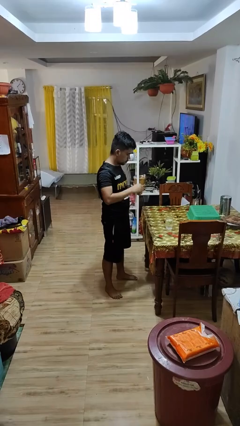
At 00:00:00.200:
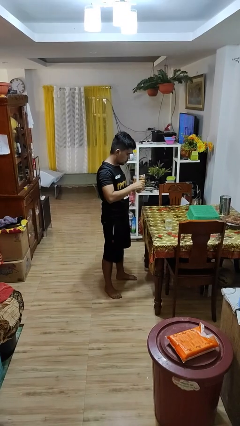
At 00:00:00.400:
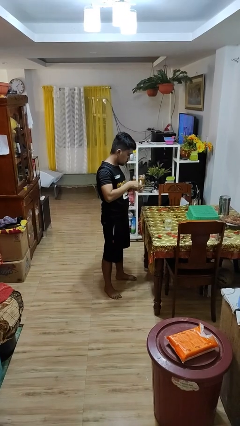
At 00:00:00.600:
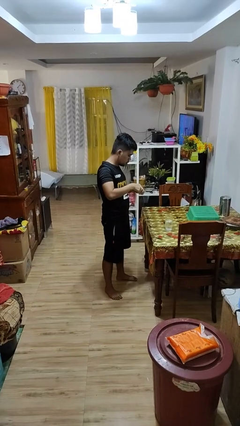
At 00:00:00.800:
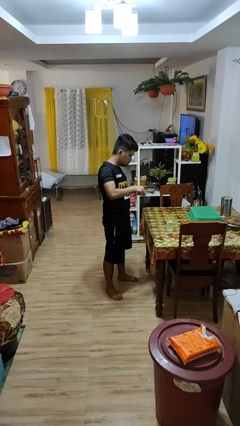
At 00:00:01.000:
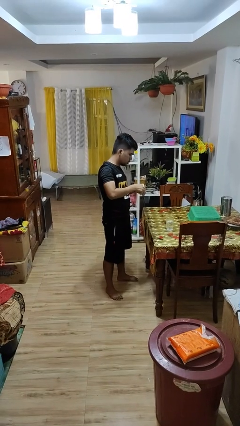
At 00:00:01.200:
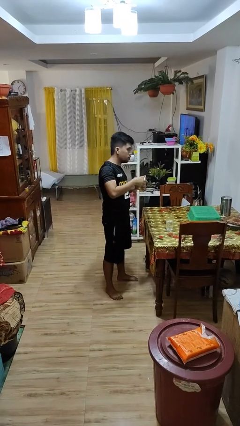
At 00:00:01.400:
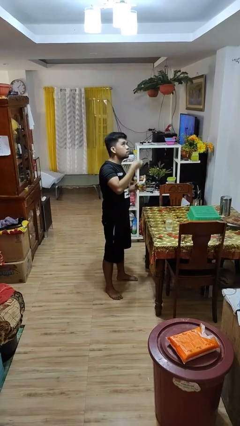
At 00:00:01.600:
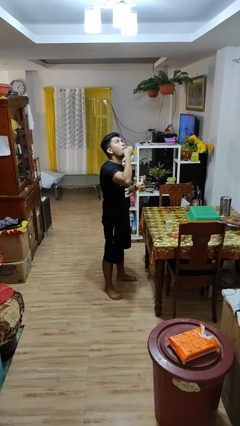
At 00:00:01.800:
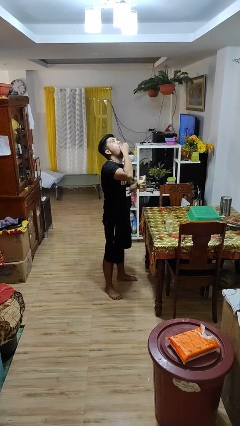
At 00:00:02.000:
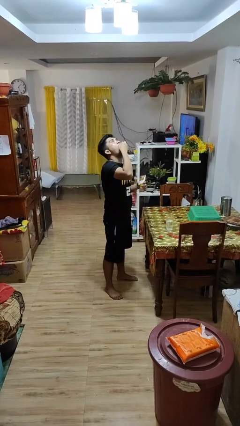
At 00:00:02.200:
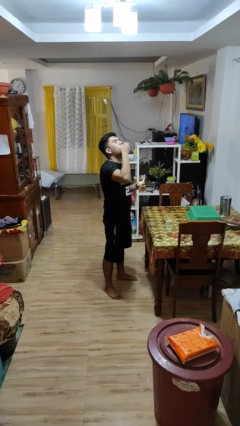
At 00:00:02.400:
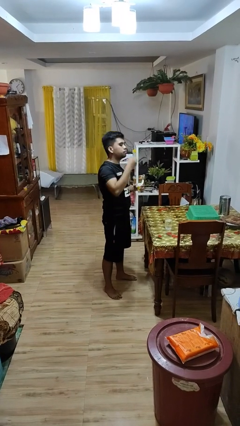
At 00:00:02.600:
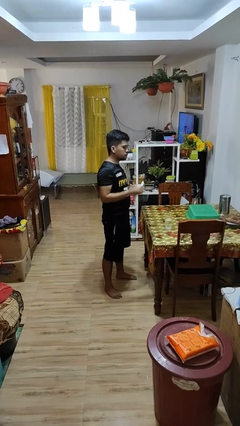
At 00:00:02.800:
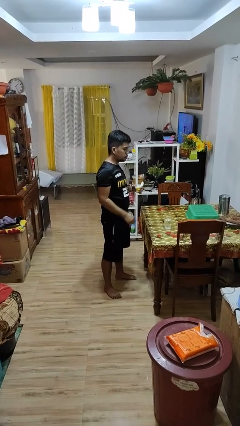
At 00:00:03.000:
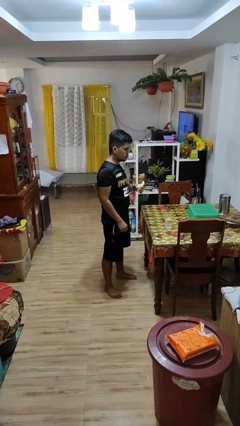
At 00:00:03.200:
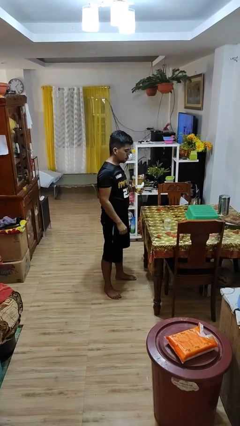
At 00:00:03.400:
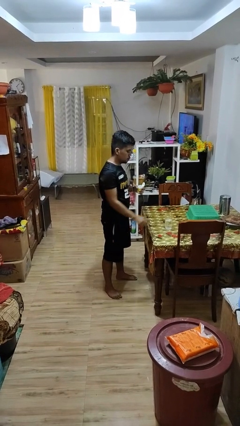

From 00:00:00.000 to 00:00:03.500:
person takes medicine pills

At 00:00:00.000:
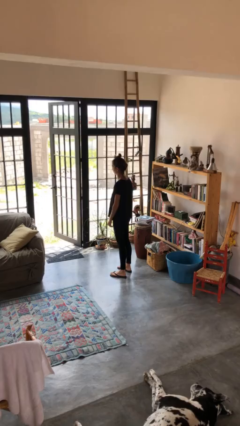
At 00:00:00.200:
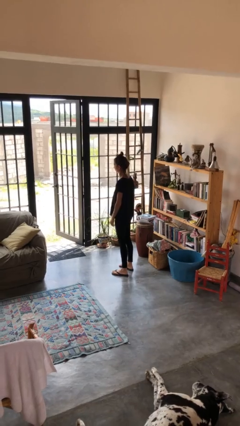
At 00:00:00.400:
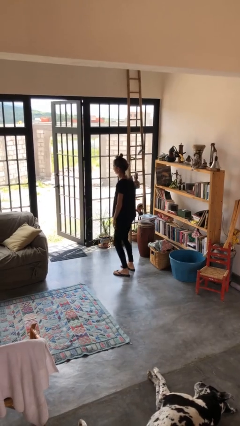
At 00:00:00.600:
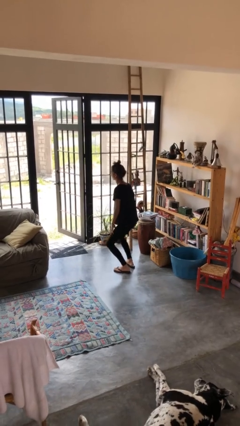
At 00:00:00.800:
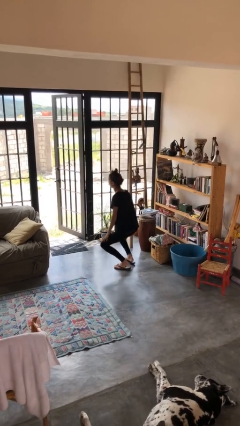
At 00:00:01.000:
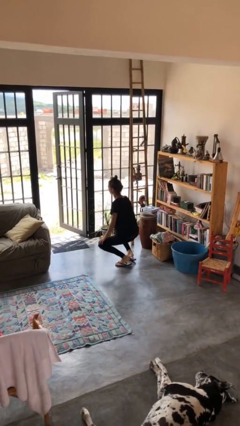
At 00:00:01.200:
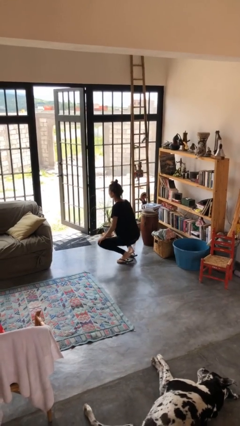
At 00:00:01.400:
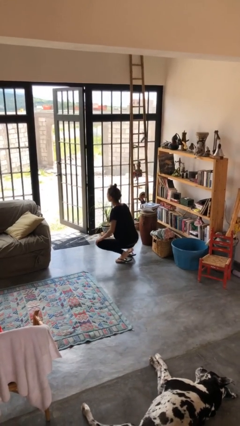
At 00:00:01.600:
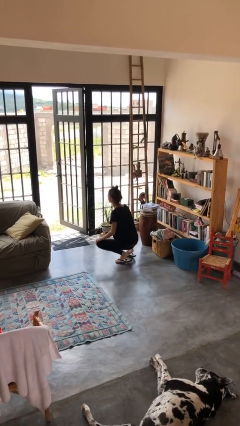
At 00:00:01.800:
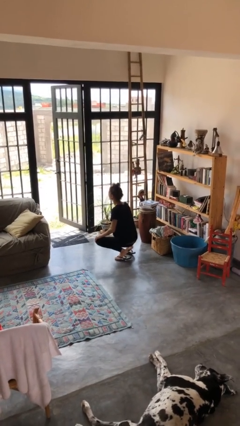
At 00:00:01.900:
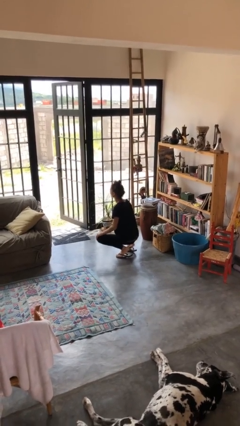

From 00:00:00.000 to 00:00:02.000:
person squats

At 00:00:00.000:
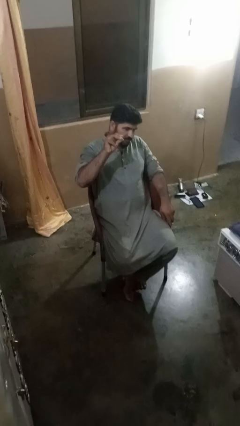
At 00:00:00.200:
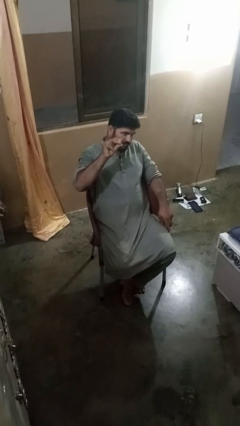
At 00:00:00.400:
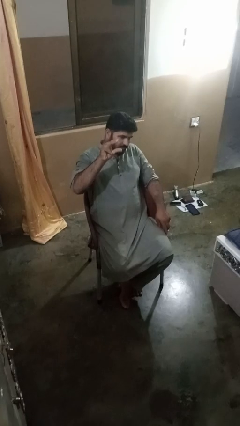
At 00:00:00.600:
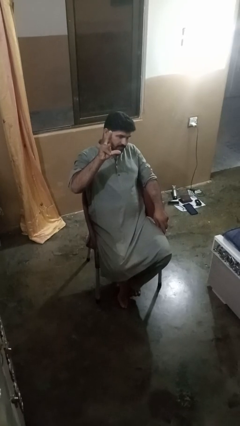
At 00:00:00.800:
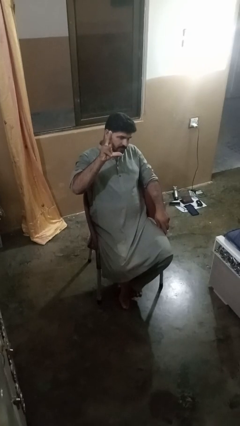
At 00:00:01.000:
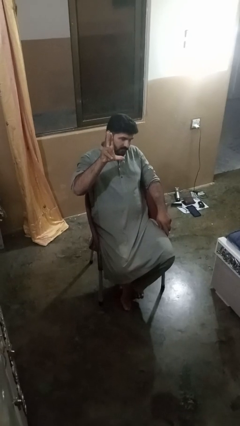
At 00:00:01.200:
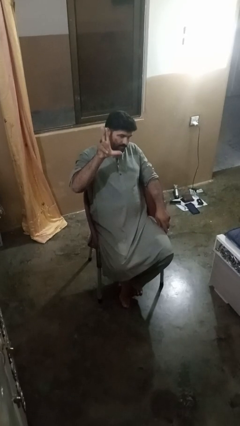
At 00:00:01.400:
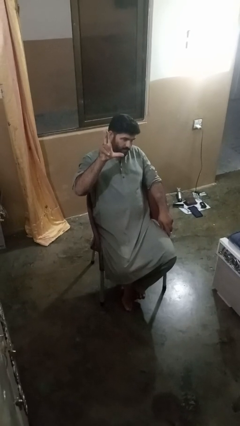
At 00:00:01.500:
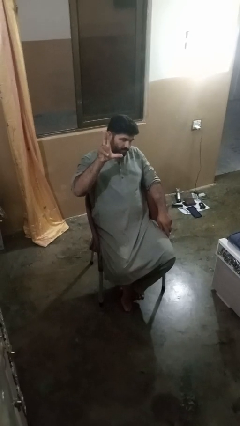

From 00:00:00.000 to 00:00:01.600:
person gestures zoom out

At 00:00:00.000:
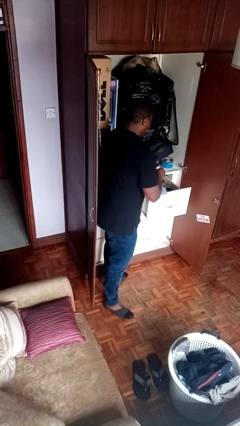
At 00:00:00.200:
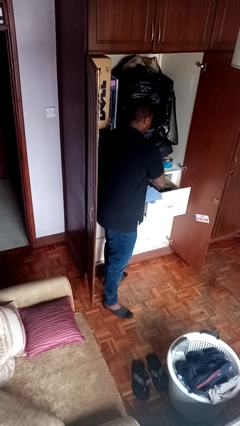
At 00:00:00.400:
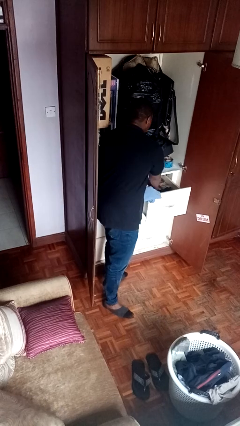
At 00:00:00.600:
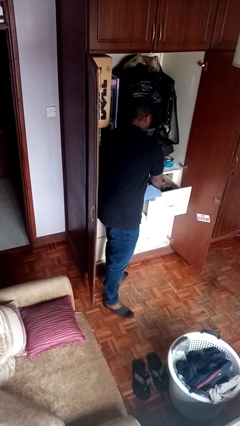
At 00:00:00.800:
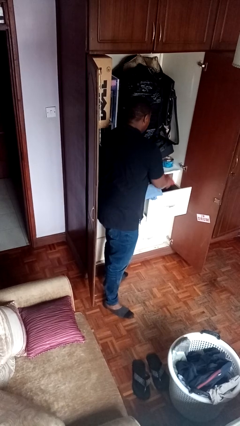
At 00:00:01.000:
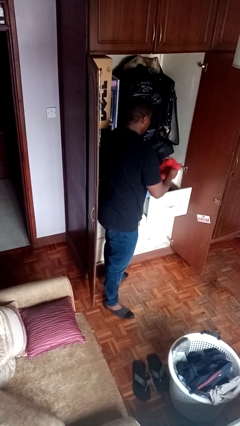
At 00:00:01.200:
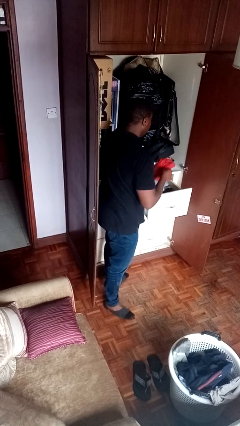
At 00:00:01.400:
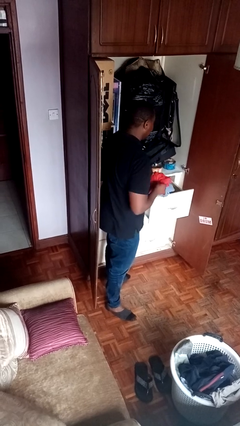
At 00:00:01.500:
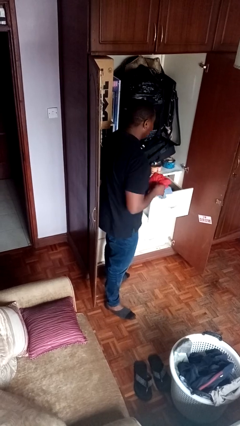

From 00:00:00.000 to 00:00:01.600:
person takes clothes from dresser

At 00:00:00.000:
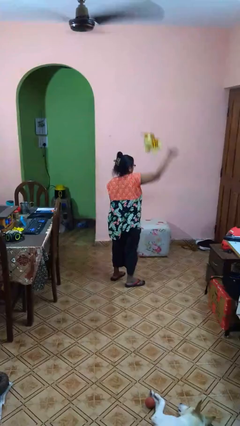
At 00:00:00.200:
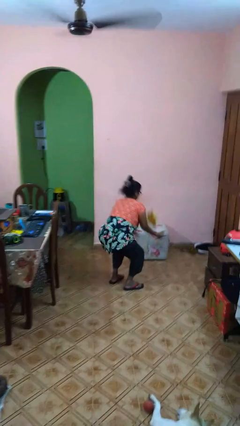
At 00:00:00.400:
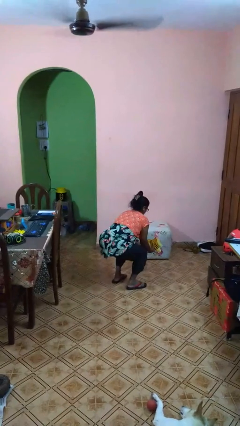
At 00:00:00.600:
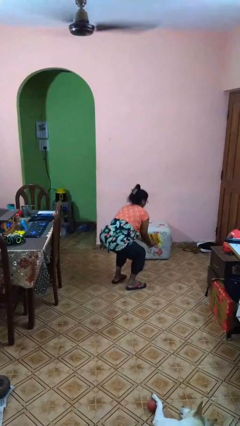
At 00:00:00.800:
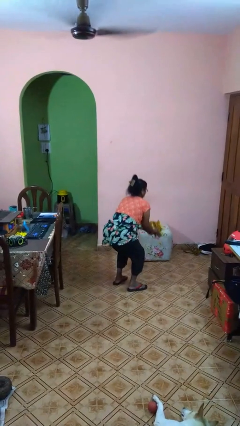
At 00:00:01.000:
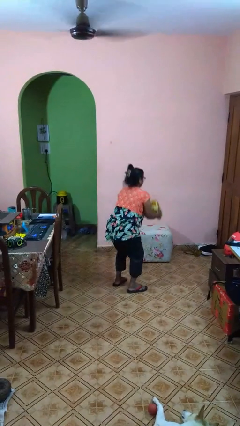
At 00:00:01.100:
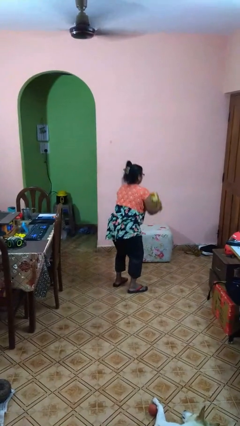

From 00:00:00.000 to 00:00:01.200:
person catches dropped object

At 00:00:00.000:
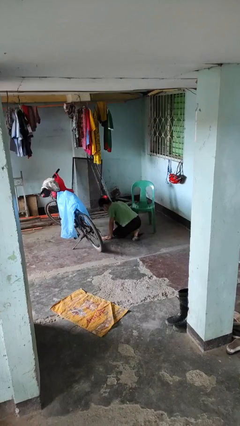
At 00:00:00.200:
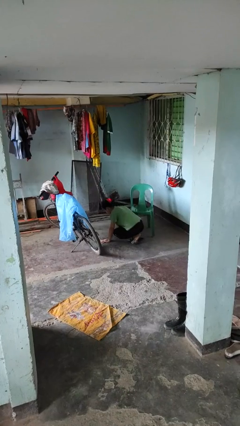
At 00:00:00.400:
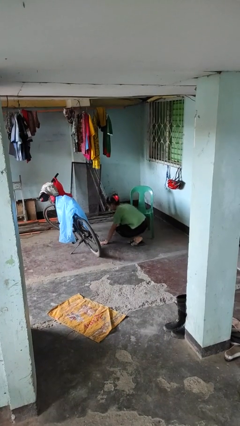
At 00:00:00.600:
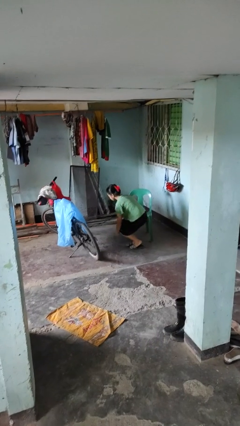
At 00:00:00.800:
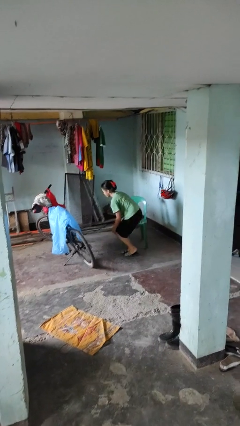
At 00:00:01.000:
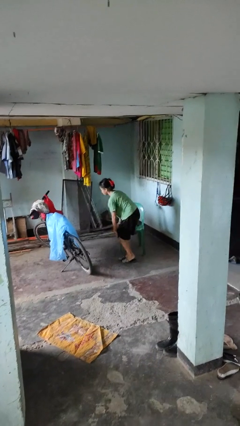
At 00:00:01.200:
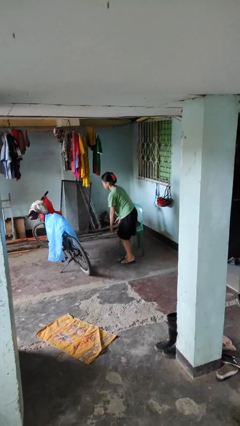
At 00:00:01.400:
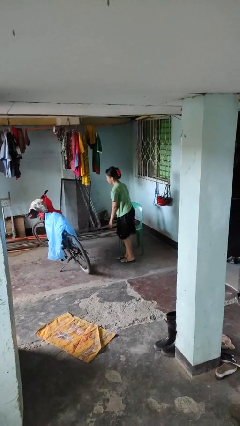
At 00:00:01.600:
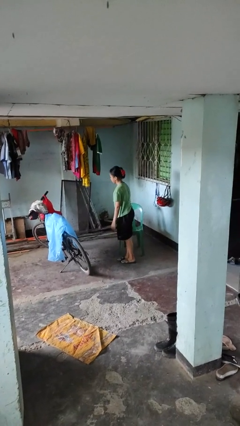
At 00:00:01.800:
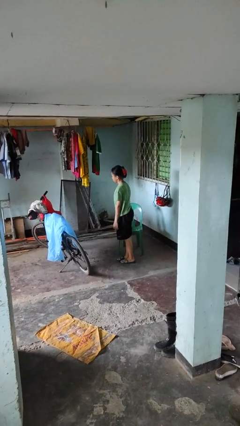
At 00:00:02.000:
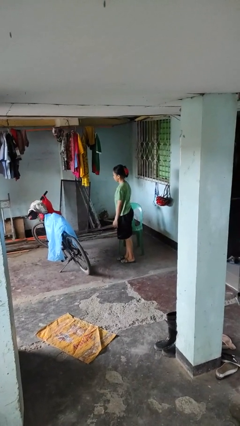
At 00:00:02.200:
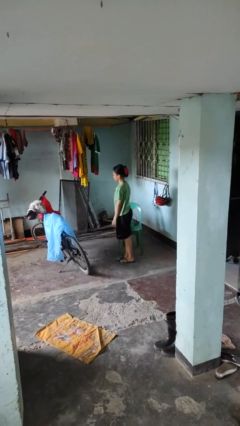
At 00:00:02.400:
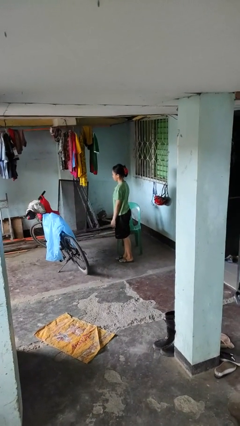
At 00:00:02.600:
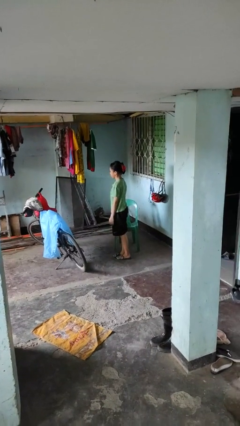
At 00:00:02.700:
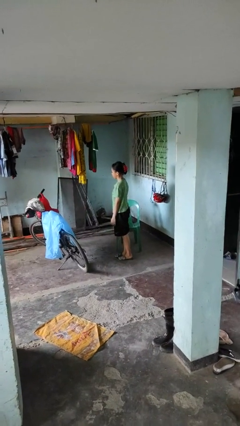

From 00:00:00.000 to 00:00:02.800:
person stands up from floor

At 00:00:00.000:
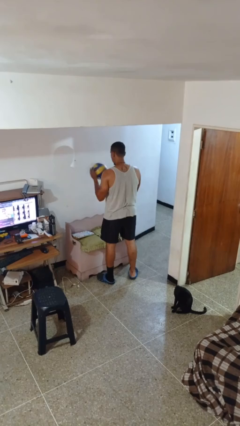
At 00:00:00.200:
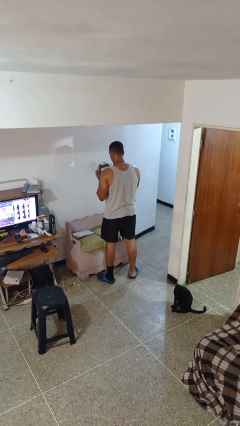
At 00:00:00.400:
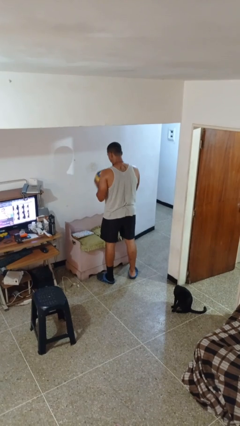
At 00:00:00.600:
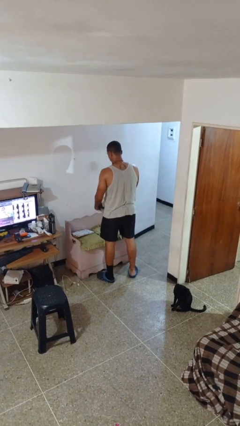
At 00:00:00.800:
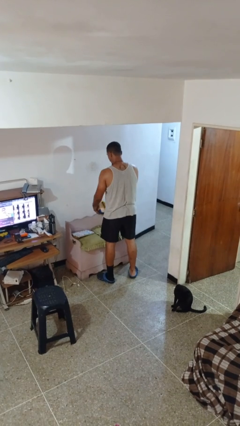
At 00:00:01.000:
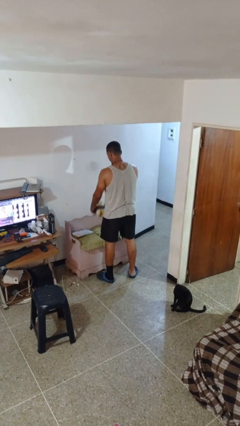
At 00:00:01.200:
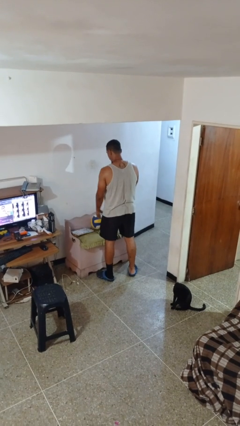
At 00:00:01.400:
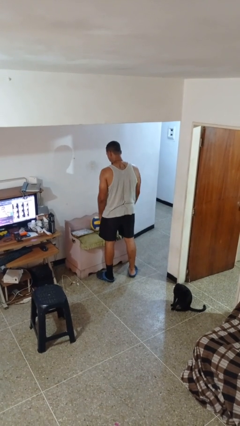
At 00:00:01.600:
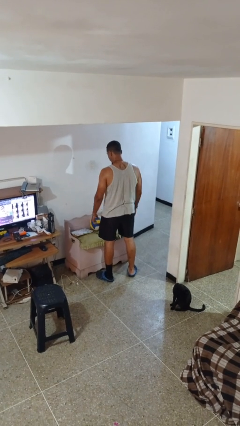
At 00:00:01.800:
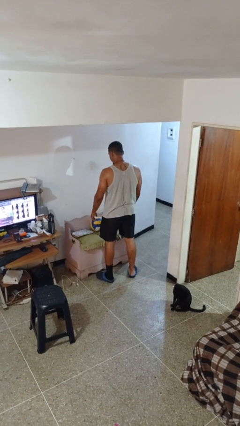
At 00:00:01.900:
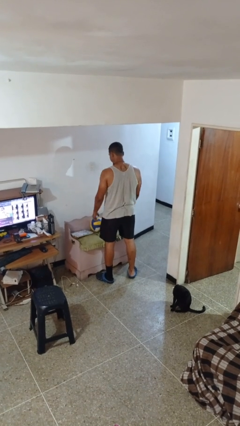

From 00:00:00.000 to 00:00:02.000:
person puts down object on couch

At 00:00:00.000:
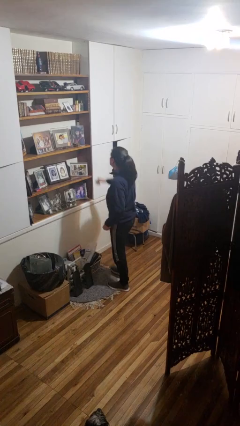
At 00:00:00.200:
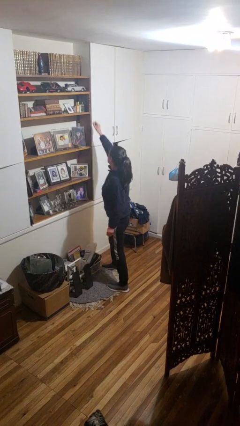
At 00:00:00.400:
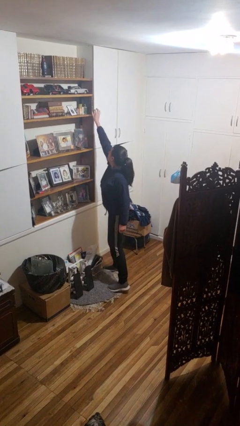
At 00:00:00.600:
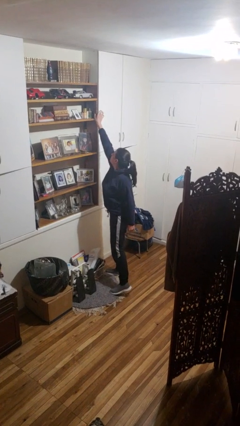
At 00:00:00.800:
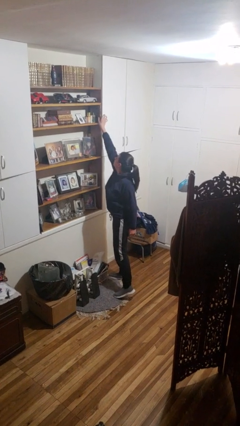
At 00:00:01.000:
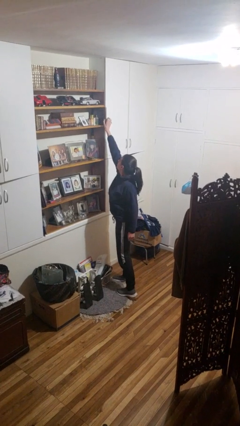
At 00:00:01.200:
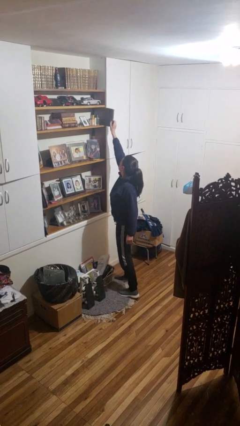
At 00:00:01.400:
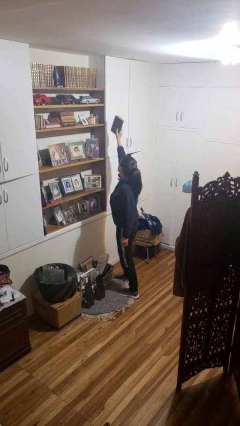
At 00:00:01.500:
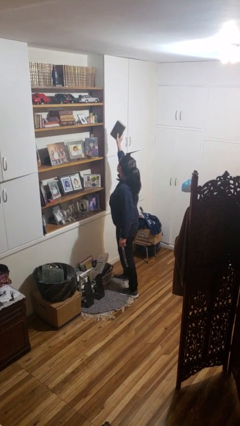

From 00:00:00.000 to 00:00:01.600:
person picks up object from shelf

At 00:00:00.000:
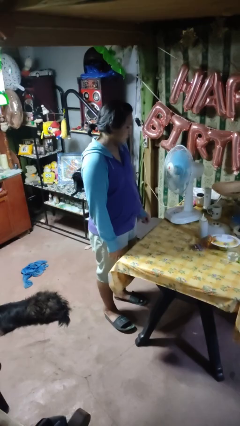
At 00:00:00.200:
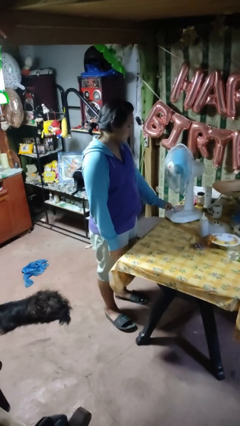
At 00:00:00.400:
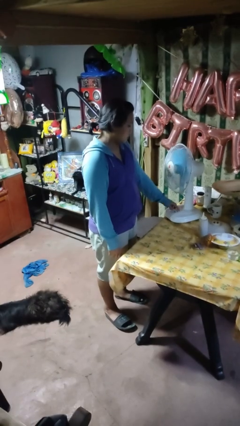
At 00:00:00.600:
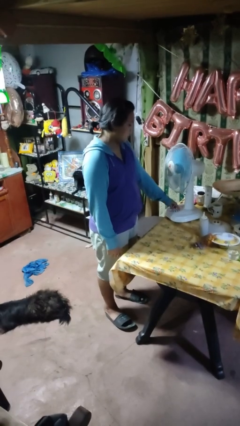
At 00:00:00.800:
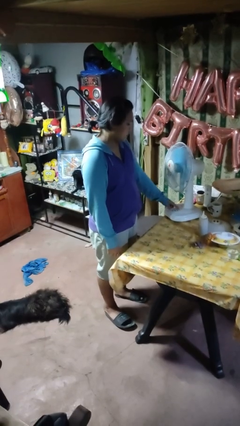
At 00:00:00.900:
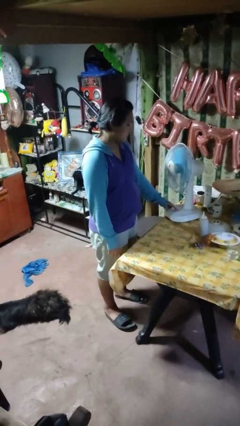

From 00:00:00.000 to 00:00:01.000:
person turns off fan
